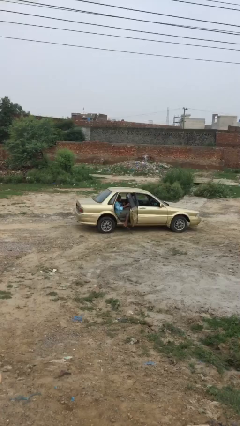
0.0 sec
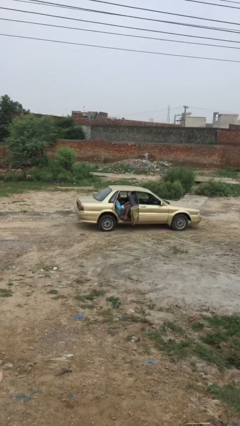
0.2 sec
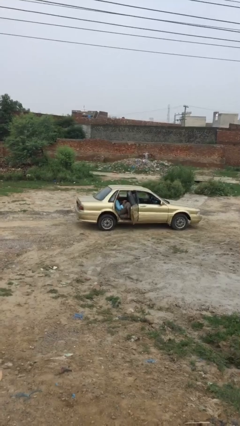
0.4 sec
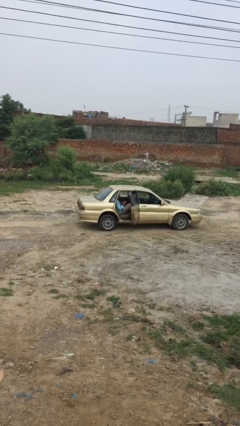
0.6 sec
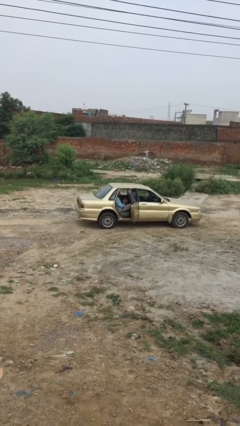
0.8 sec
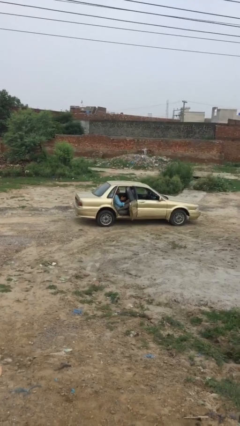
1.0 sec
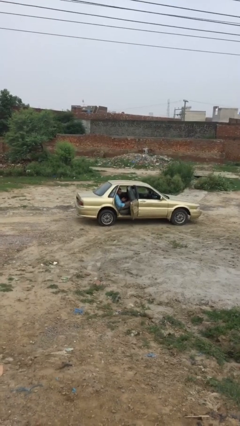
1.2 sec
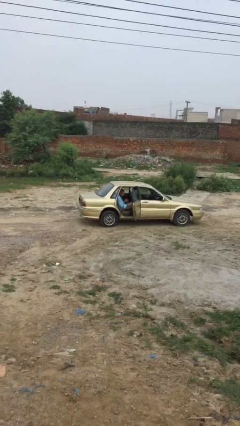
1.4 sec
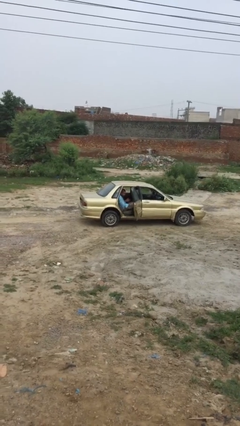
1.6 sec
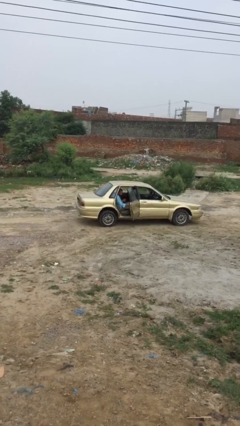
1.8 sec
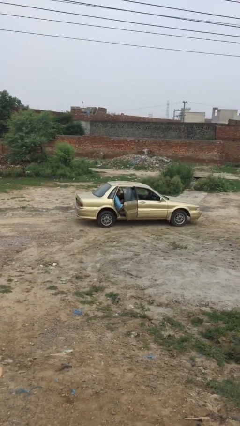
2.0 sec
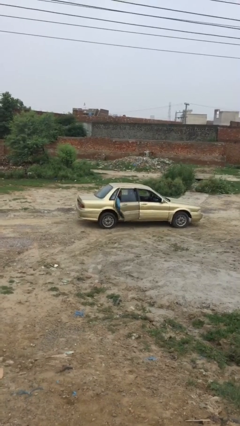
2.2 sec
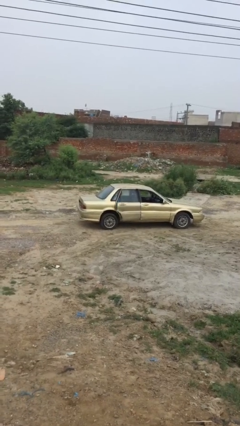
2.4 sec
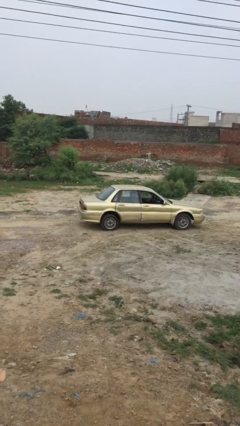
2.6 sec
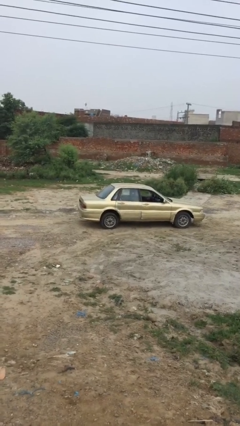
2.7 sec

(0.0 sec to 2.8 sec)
person closes car door

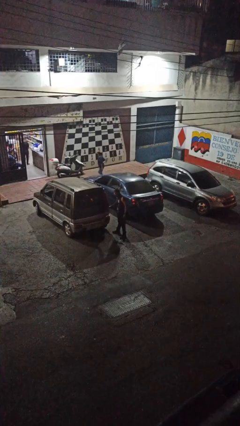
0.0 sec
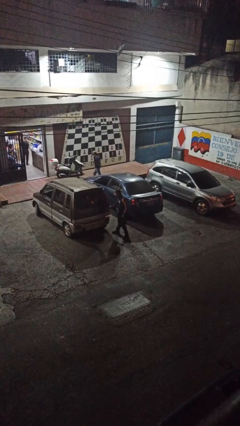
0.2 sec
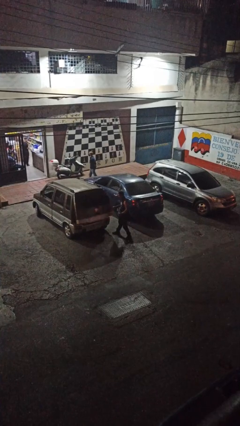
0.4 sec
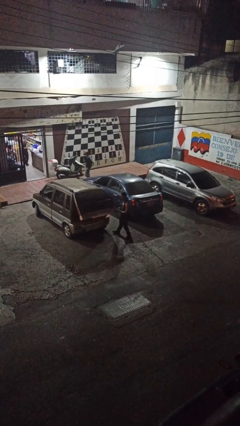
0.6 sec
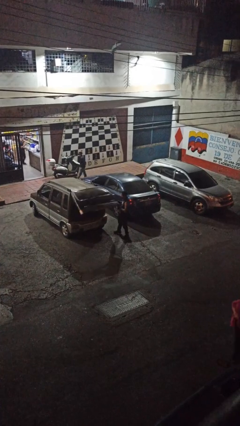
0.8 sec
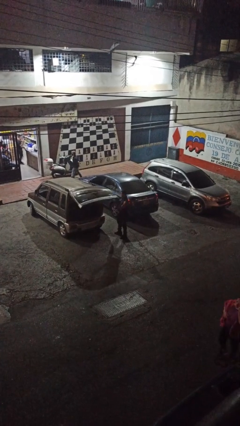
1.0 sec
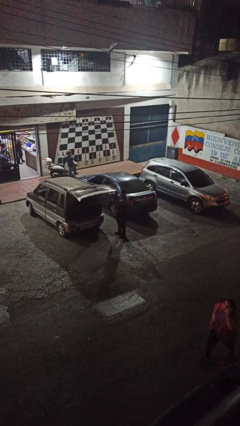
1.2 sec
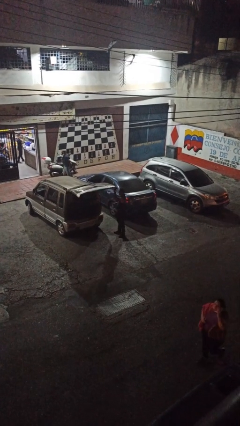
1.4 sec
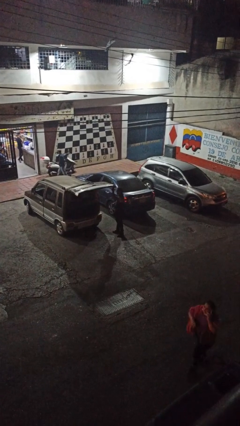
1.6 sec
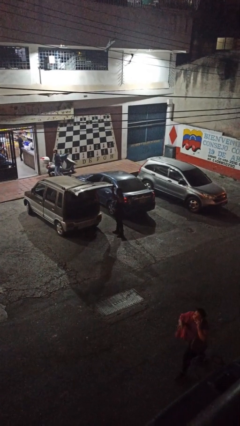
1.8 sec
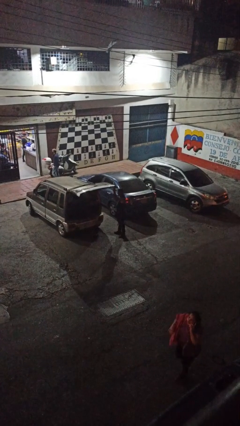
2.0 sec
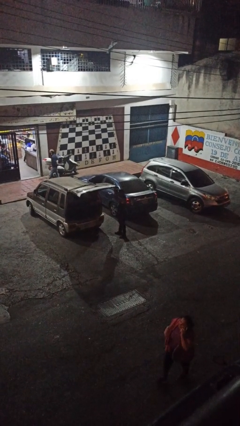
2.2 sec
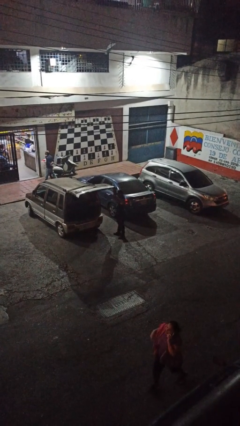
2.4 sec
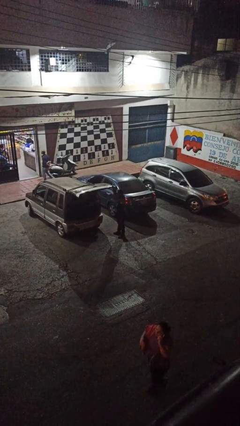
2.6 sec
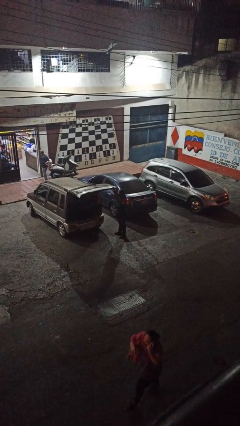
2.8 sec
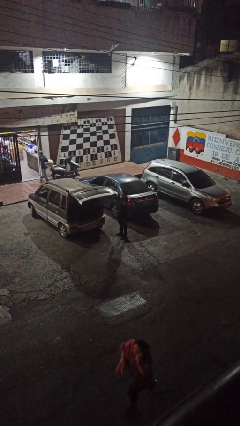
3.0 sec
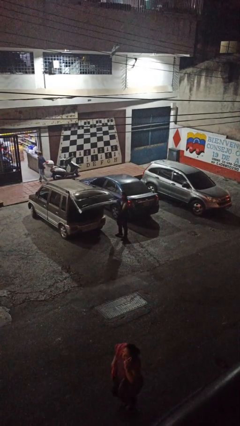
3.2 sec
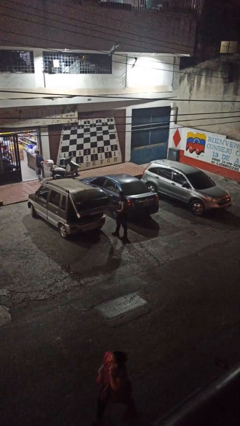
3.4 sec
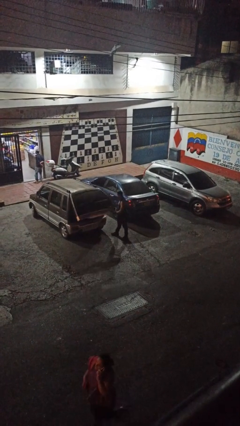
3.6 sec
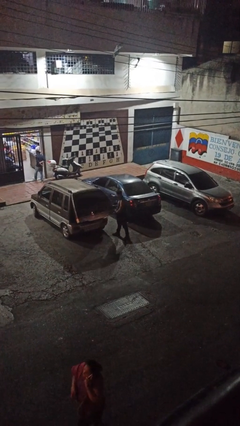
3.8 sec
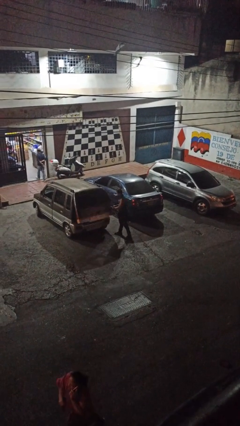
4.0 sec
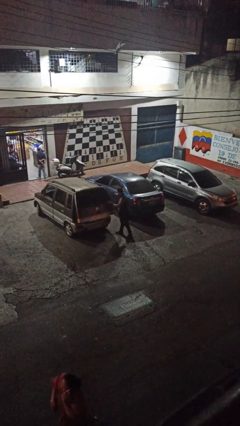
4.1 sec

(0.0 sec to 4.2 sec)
person opens car trunk

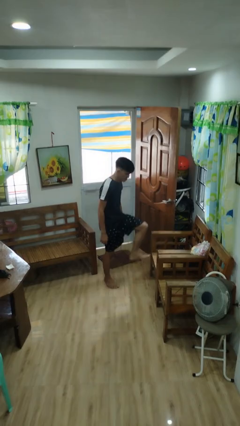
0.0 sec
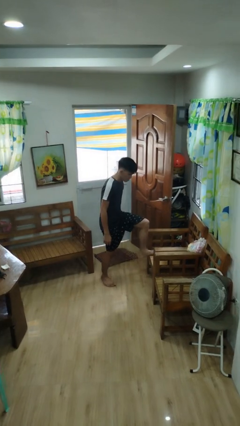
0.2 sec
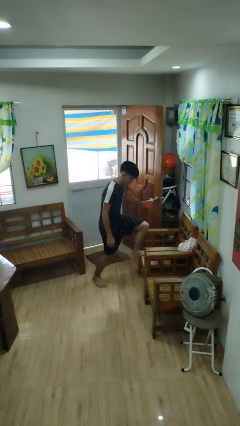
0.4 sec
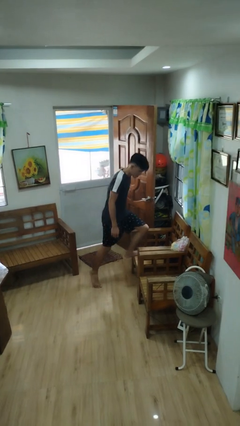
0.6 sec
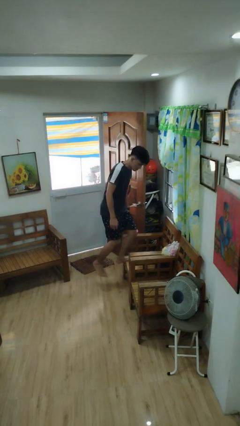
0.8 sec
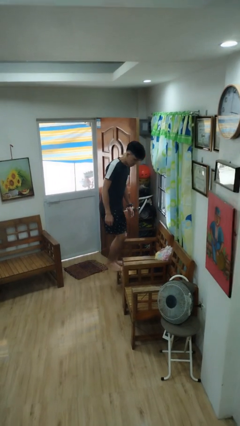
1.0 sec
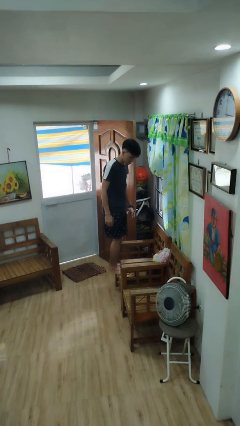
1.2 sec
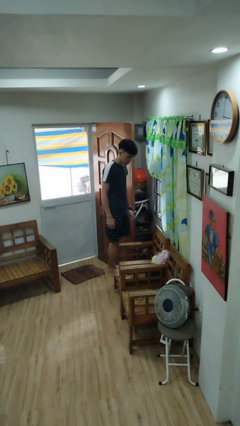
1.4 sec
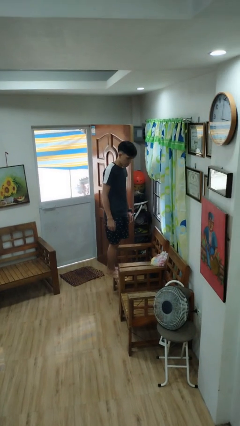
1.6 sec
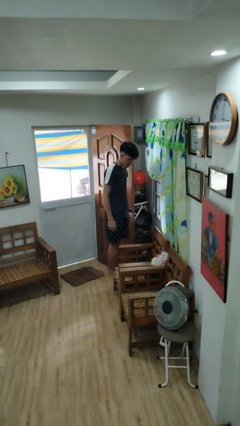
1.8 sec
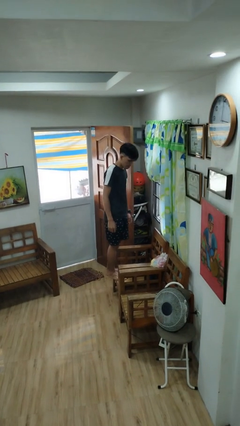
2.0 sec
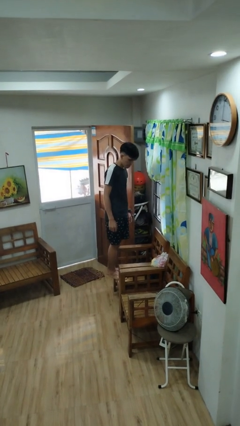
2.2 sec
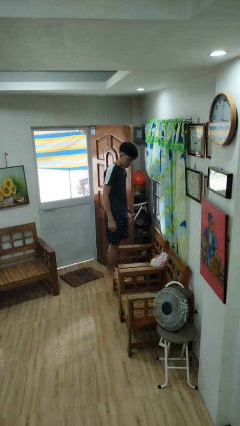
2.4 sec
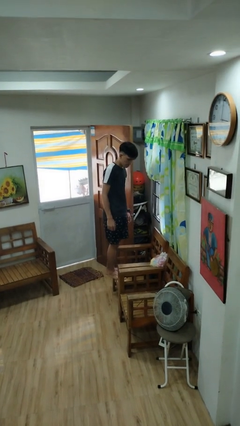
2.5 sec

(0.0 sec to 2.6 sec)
person climbs on chair

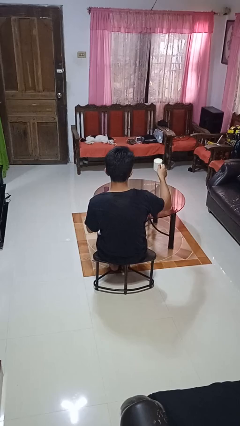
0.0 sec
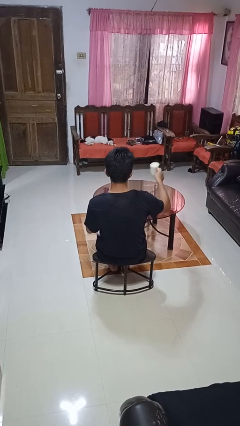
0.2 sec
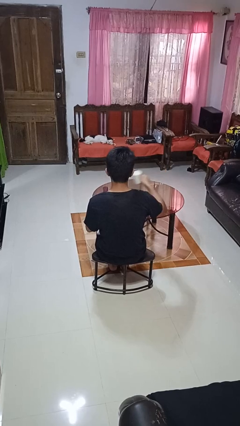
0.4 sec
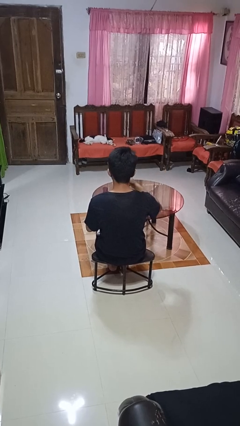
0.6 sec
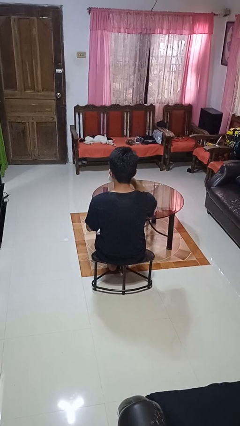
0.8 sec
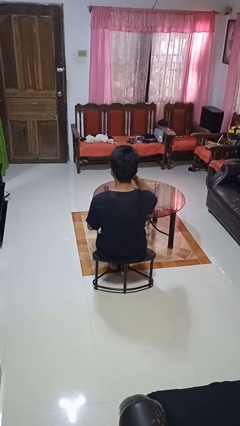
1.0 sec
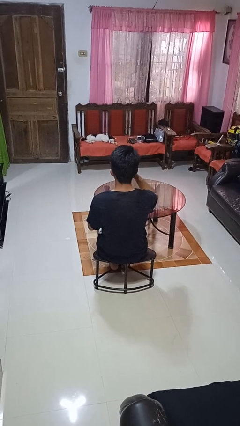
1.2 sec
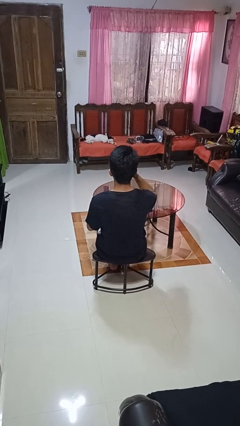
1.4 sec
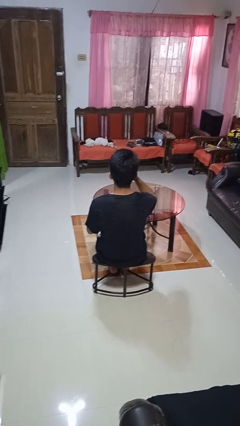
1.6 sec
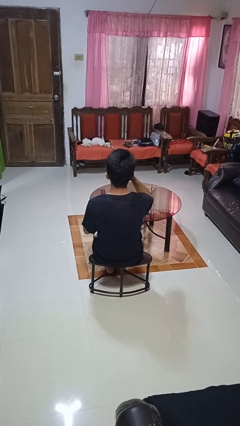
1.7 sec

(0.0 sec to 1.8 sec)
person drinks from mug

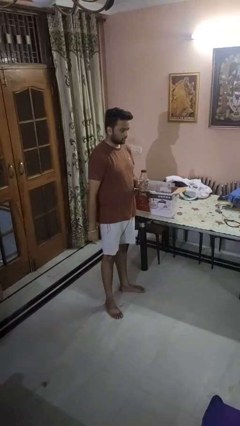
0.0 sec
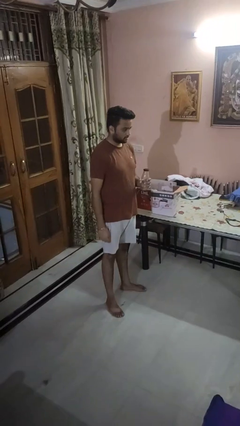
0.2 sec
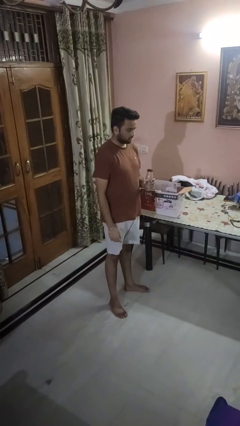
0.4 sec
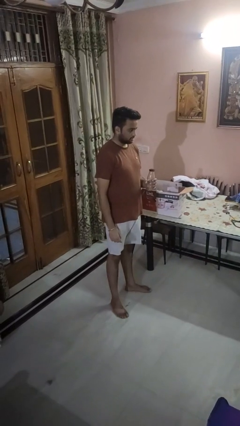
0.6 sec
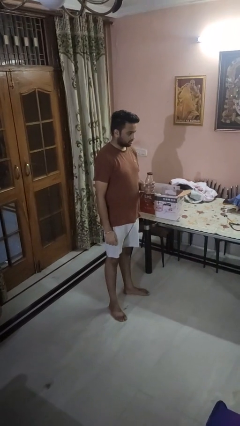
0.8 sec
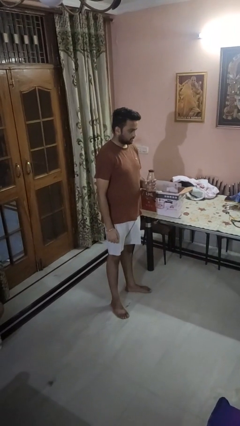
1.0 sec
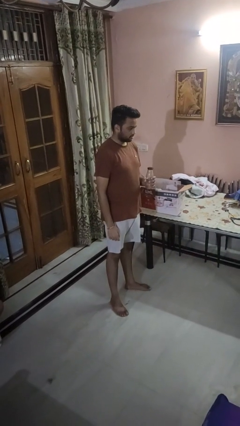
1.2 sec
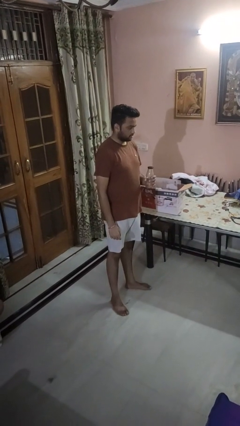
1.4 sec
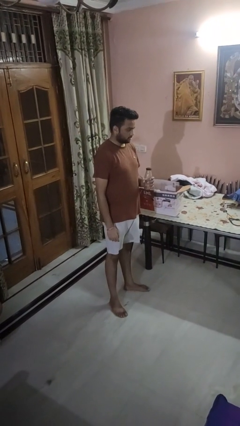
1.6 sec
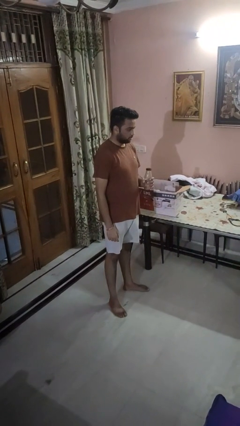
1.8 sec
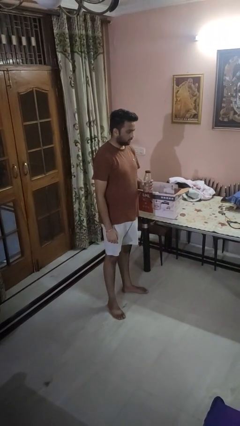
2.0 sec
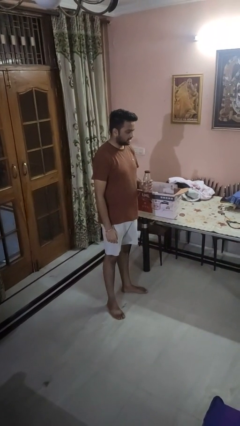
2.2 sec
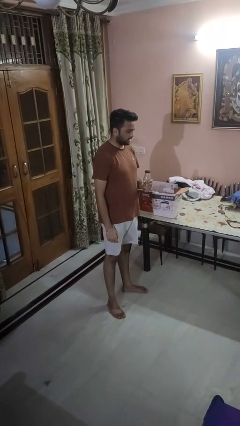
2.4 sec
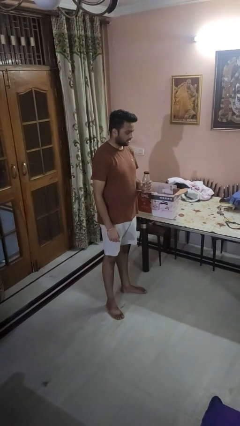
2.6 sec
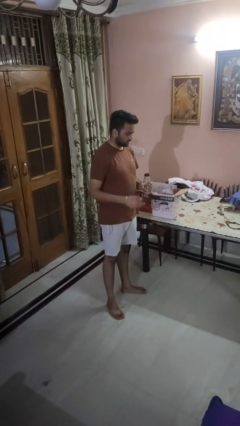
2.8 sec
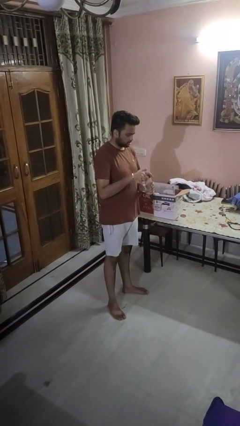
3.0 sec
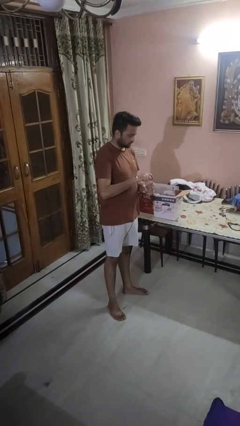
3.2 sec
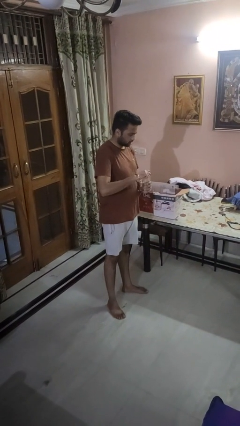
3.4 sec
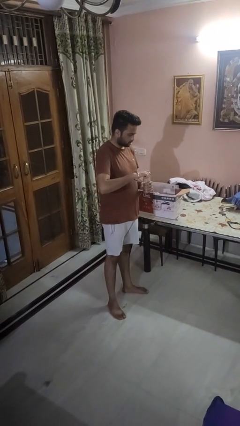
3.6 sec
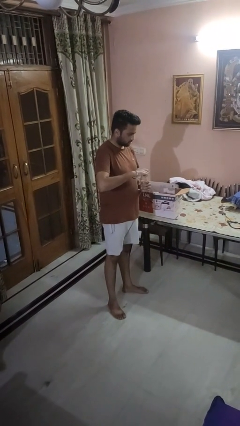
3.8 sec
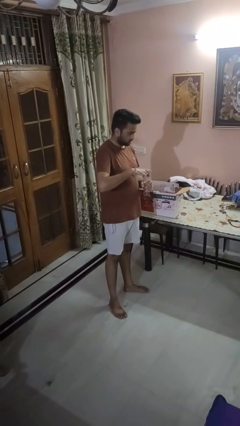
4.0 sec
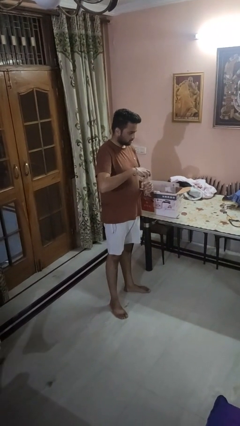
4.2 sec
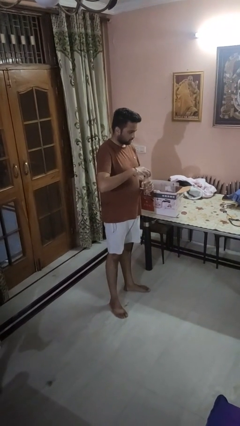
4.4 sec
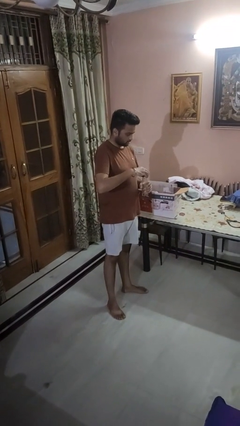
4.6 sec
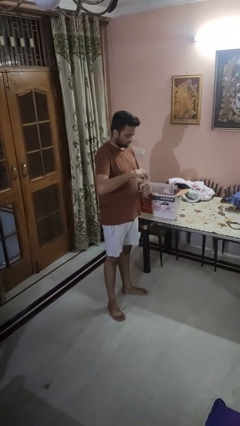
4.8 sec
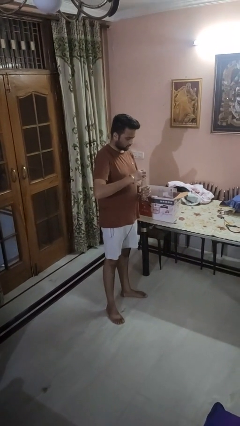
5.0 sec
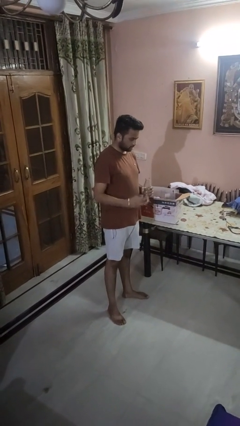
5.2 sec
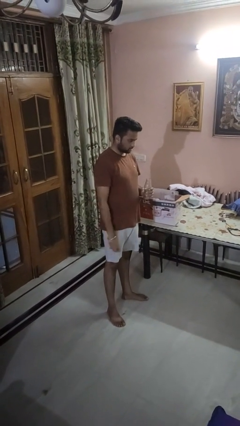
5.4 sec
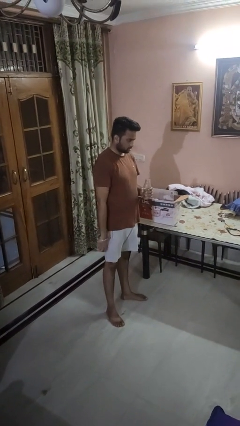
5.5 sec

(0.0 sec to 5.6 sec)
person unscrews lid from bottle

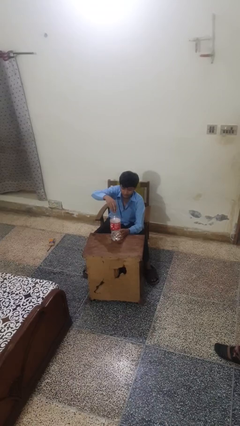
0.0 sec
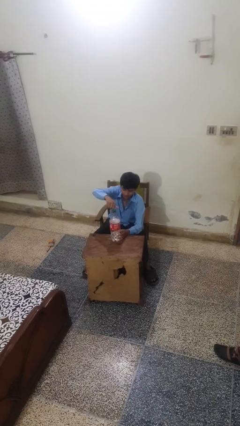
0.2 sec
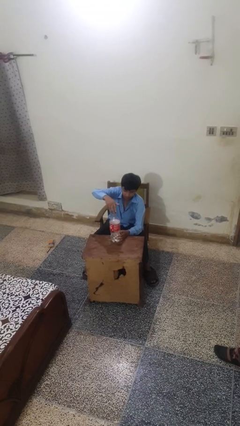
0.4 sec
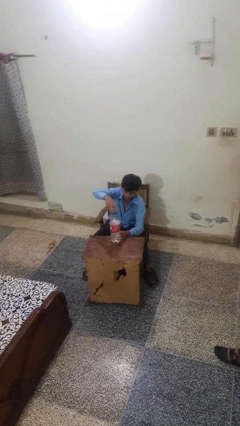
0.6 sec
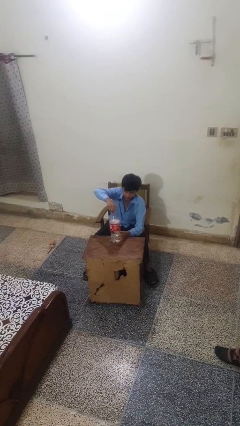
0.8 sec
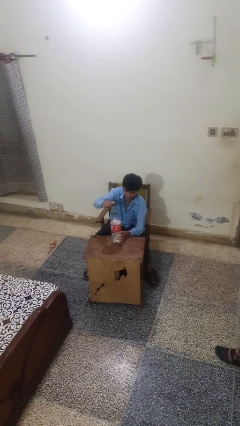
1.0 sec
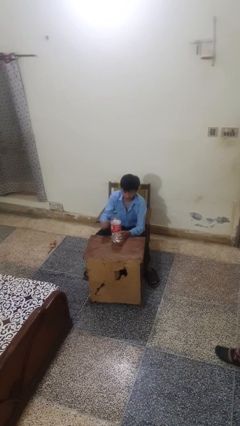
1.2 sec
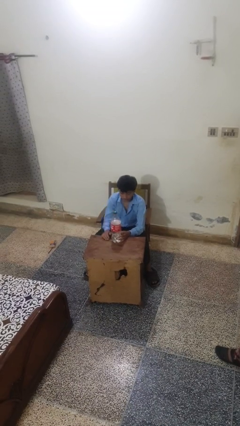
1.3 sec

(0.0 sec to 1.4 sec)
person screws lid to bottle
